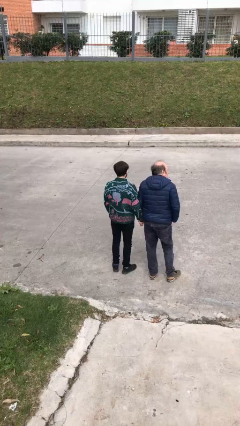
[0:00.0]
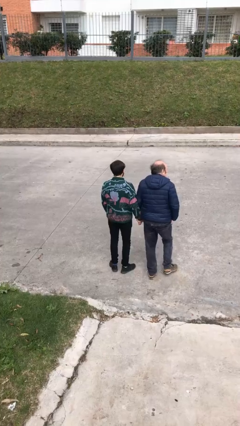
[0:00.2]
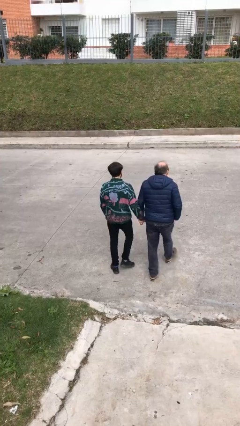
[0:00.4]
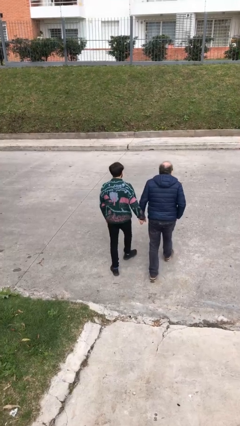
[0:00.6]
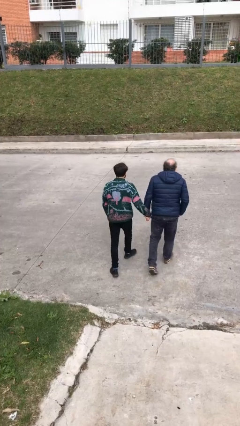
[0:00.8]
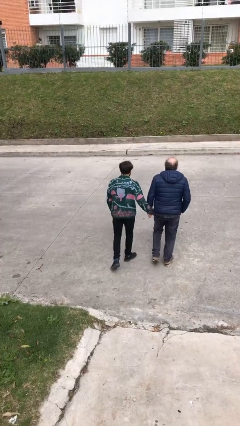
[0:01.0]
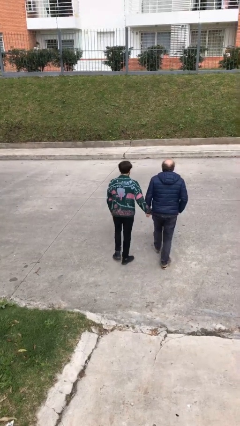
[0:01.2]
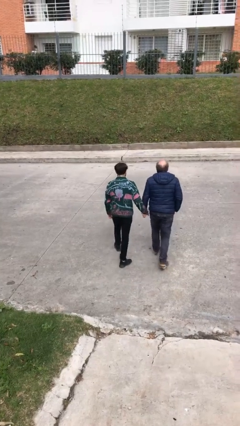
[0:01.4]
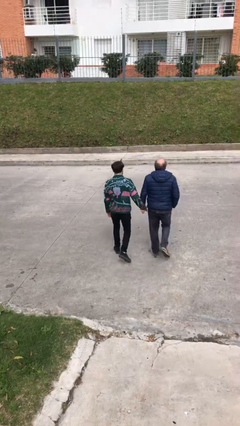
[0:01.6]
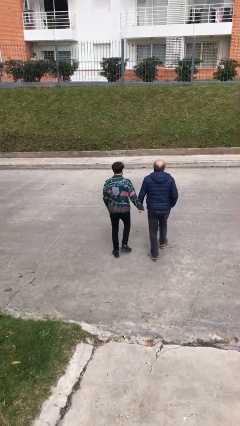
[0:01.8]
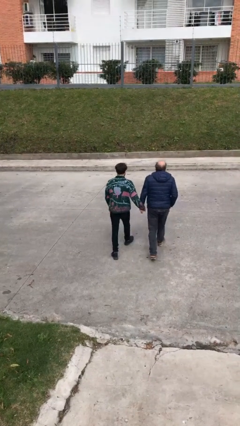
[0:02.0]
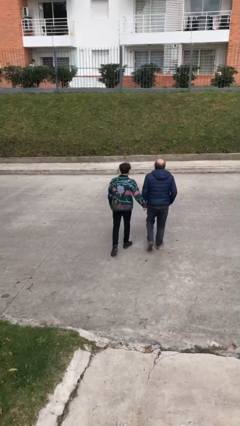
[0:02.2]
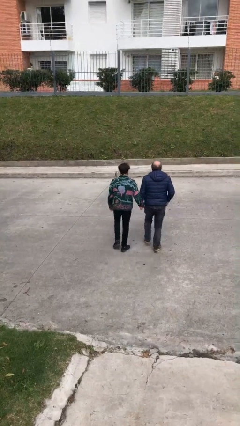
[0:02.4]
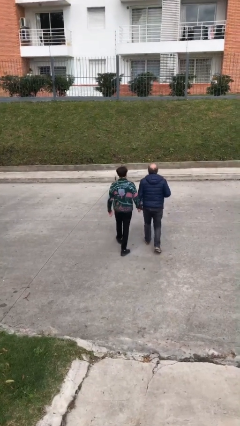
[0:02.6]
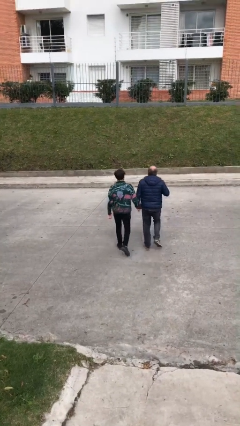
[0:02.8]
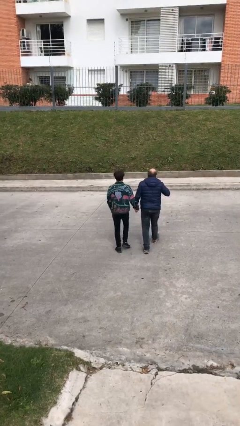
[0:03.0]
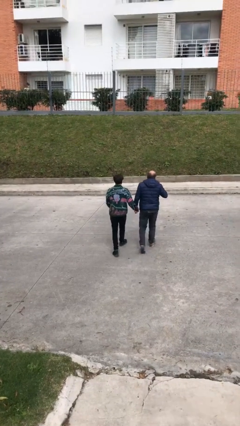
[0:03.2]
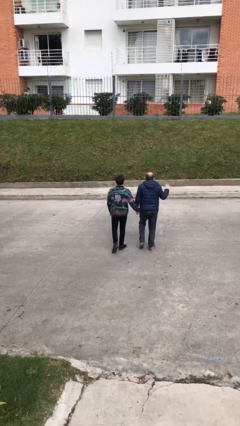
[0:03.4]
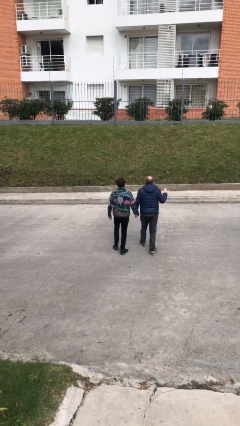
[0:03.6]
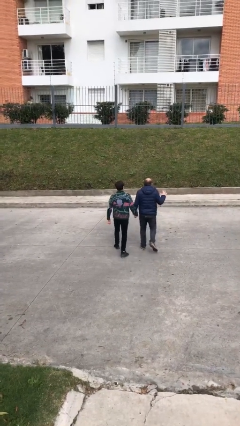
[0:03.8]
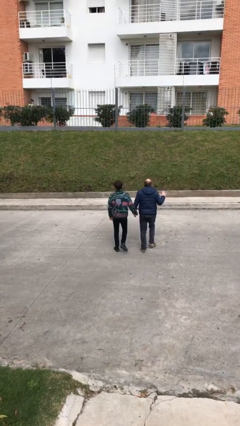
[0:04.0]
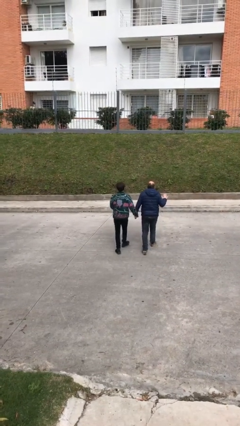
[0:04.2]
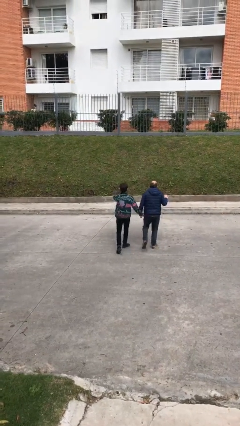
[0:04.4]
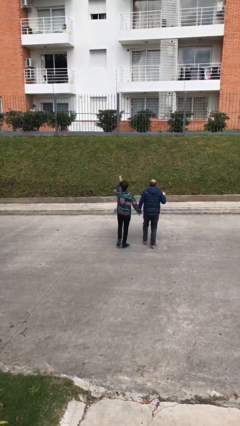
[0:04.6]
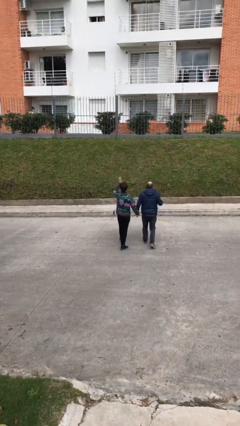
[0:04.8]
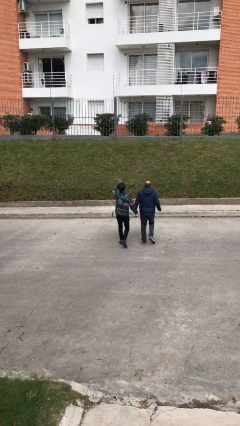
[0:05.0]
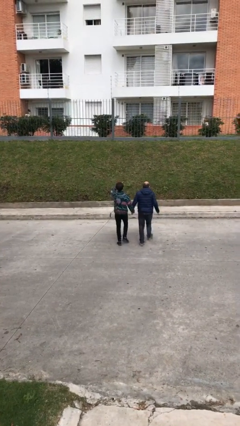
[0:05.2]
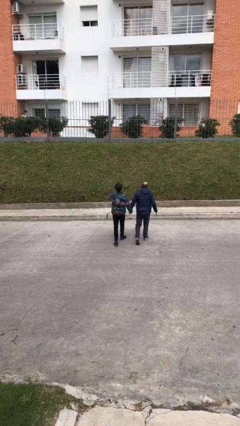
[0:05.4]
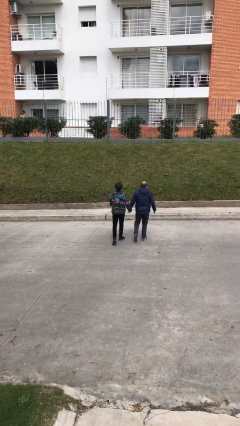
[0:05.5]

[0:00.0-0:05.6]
person holds hand

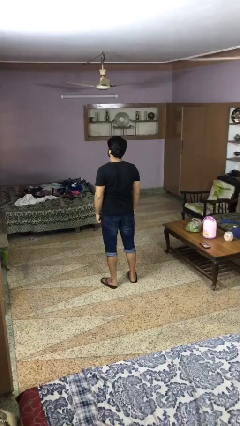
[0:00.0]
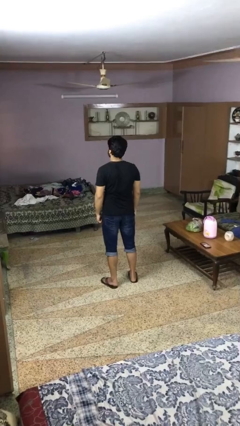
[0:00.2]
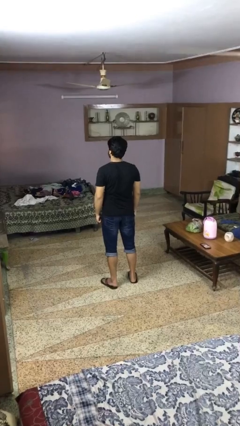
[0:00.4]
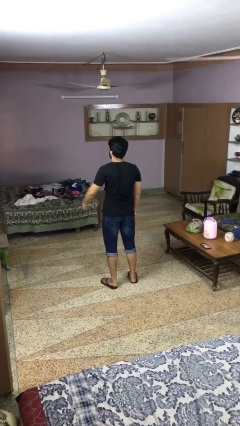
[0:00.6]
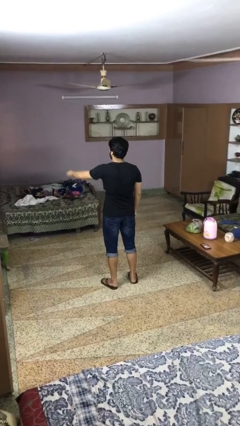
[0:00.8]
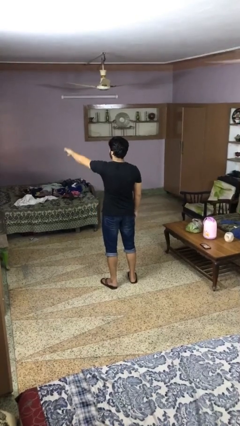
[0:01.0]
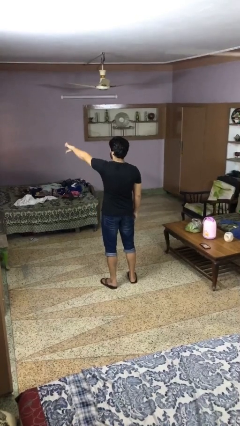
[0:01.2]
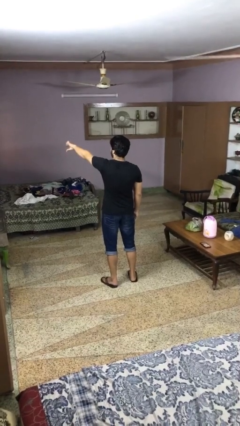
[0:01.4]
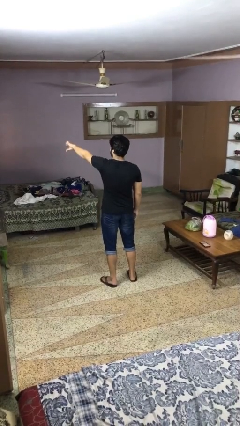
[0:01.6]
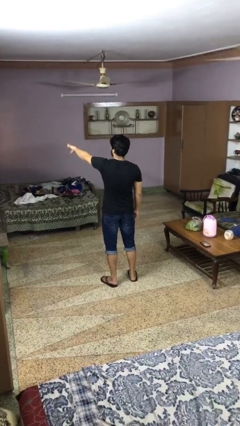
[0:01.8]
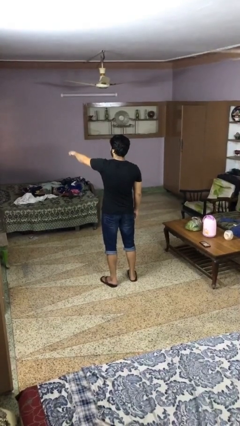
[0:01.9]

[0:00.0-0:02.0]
person gestures thumbs down

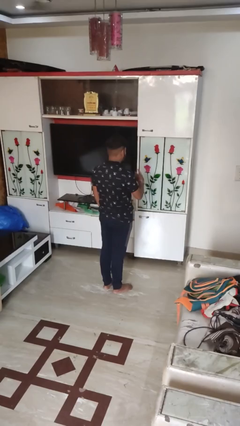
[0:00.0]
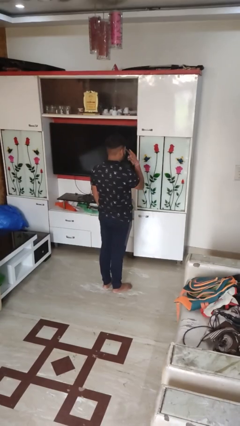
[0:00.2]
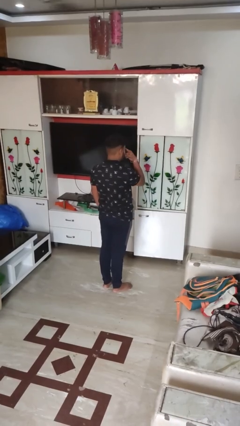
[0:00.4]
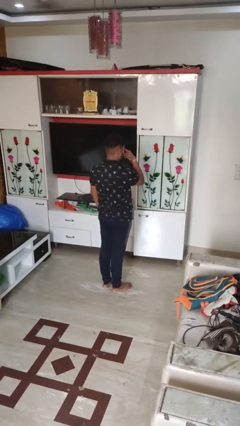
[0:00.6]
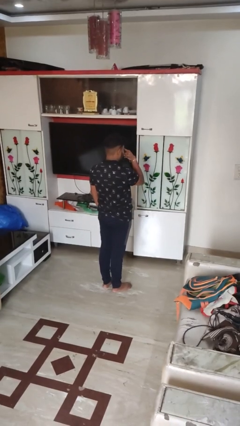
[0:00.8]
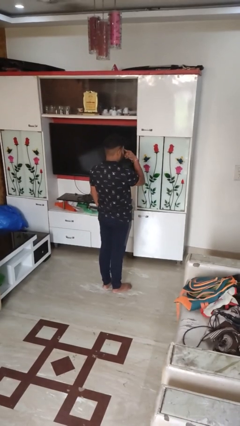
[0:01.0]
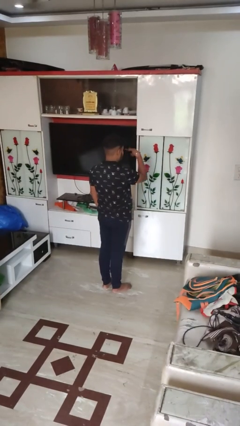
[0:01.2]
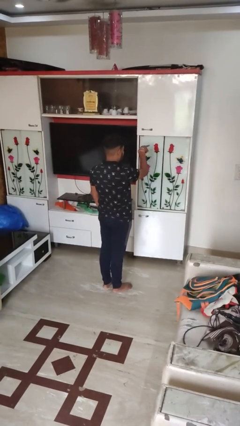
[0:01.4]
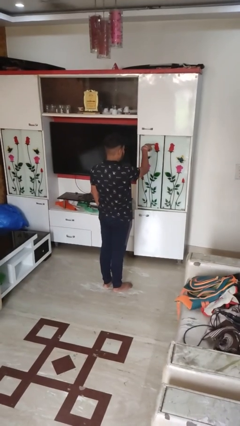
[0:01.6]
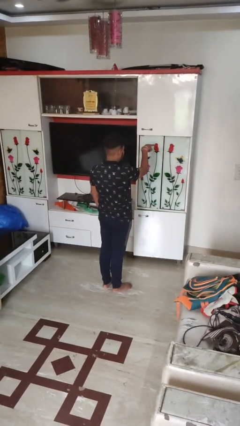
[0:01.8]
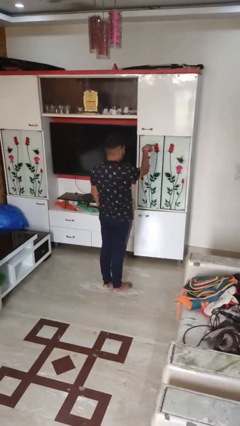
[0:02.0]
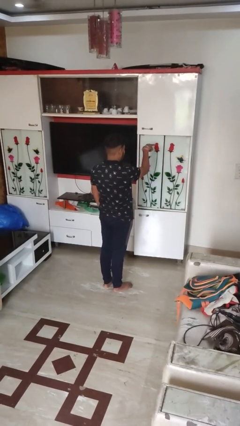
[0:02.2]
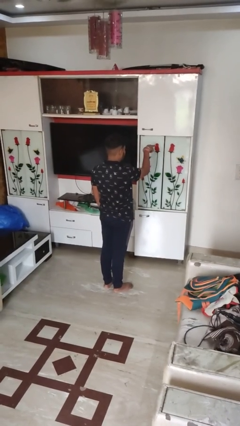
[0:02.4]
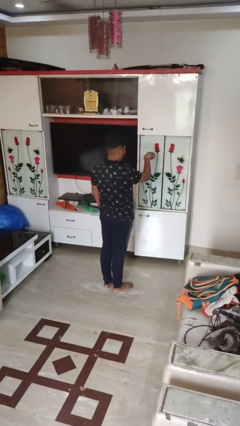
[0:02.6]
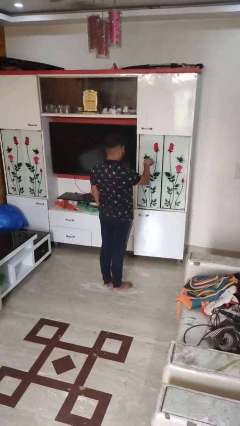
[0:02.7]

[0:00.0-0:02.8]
person gestures watch closely

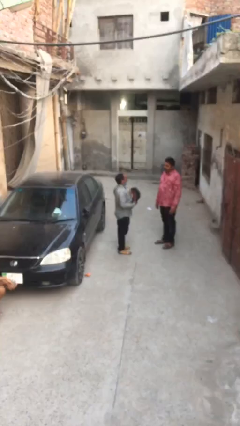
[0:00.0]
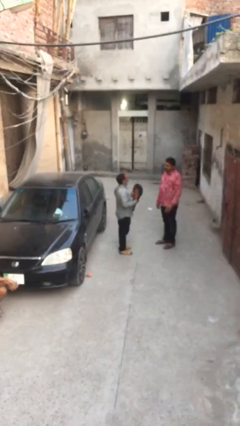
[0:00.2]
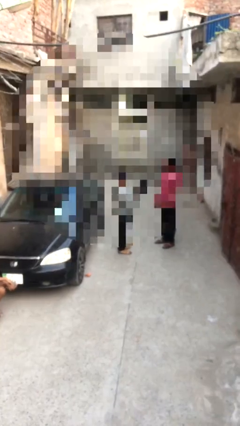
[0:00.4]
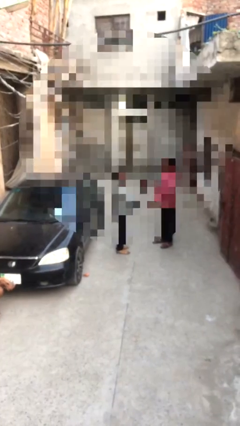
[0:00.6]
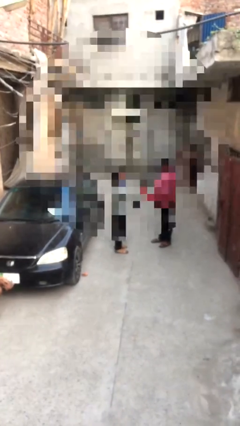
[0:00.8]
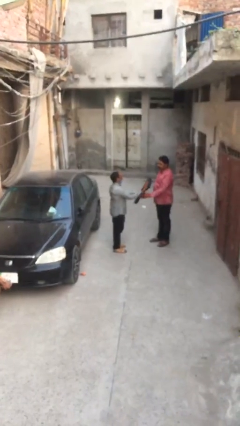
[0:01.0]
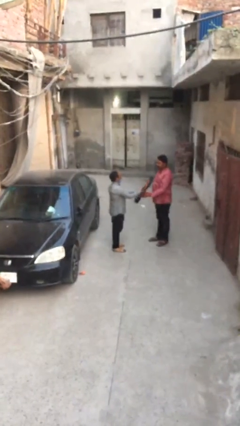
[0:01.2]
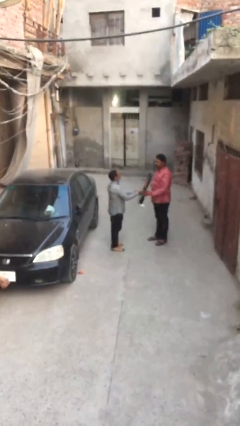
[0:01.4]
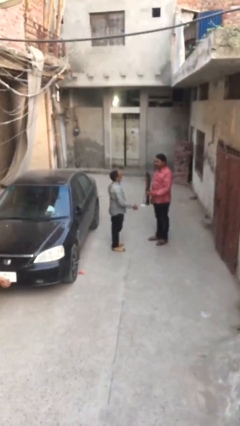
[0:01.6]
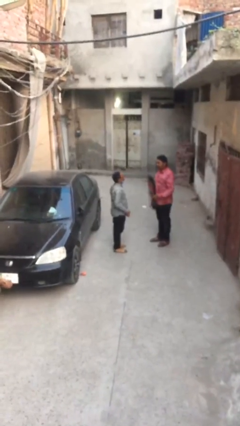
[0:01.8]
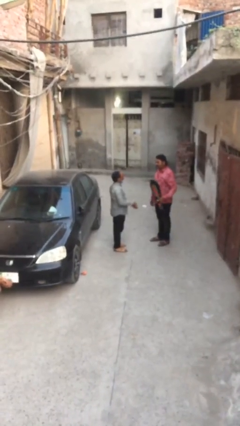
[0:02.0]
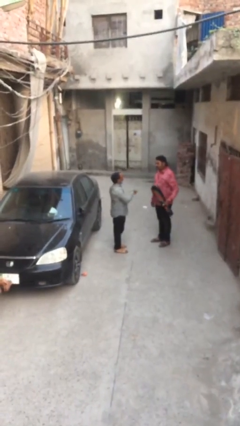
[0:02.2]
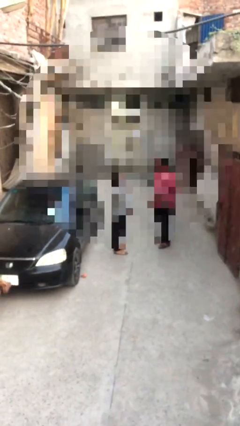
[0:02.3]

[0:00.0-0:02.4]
person transfers object to person

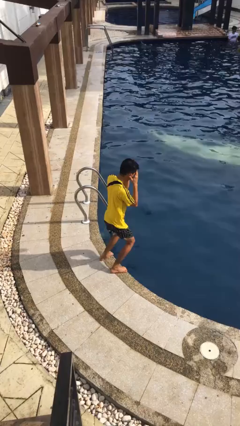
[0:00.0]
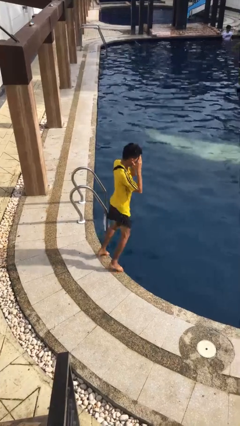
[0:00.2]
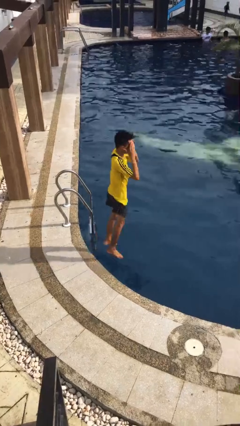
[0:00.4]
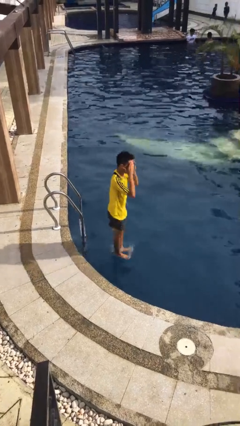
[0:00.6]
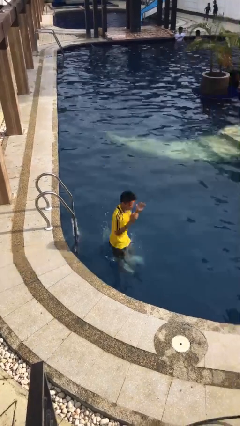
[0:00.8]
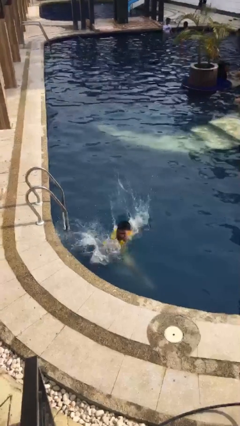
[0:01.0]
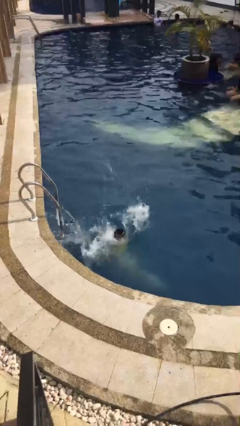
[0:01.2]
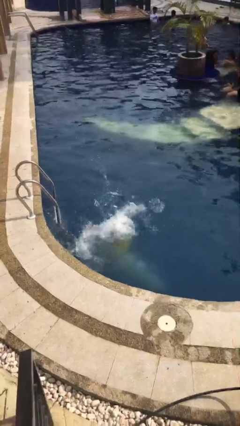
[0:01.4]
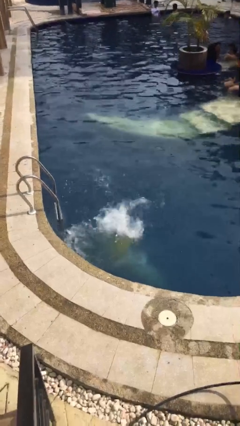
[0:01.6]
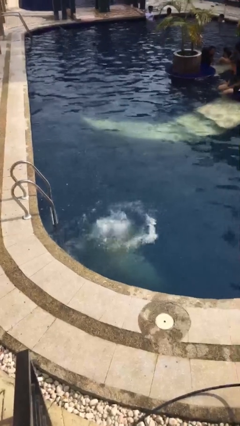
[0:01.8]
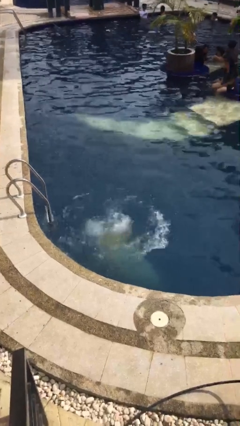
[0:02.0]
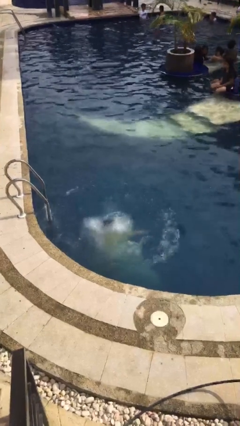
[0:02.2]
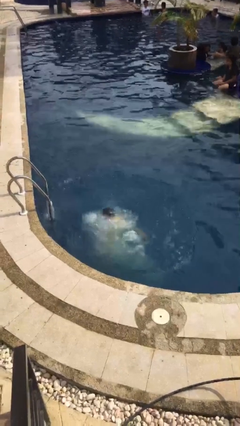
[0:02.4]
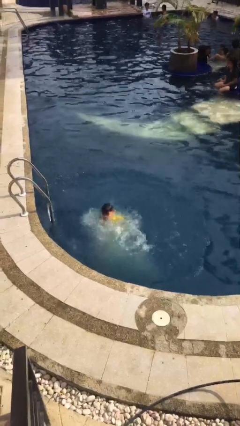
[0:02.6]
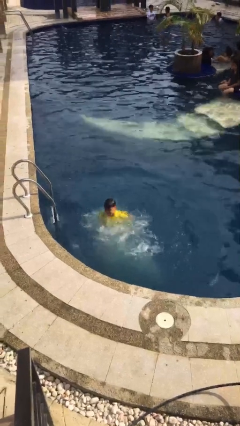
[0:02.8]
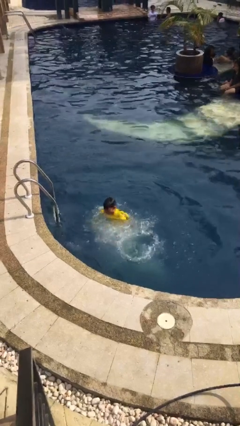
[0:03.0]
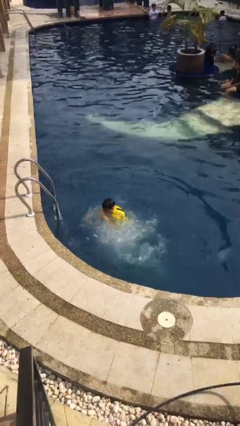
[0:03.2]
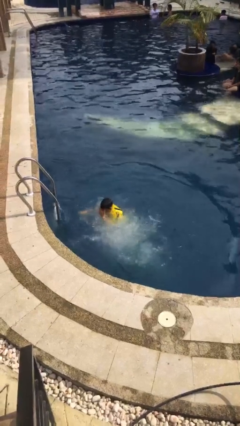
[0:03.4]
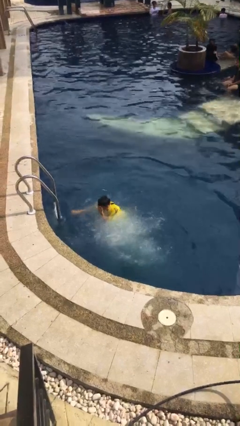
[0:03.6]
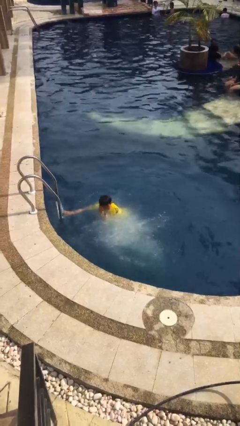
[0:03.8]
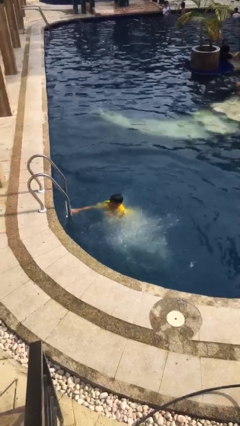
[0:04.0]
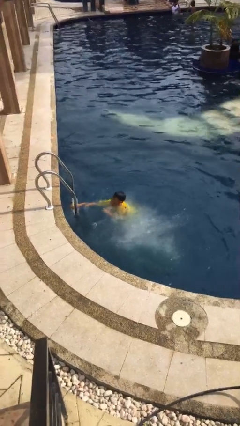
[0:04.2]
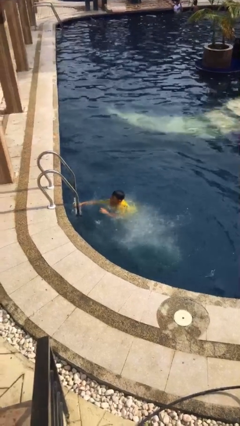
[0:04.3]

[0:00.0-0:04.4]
person jumps into pool

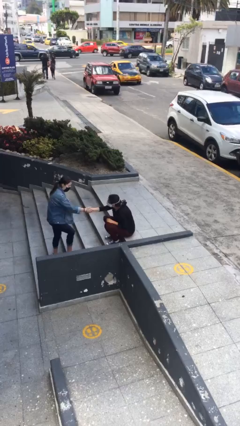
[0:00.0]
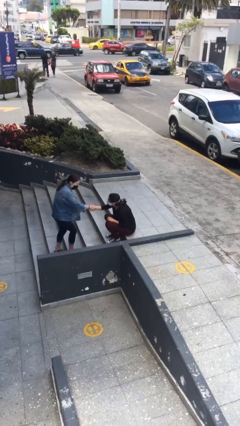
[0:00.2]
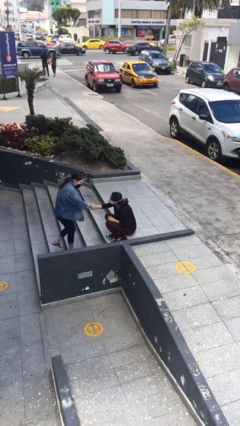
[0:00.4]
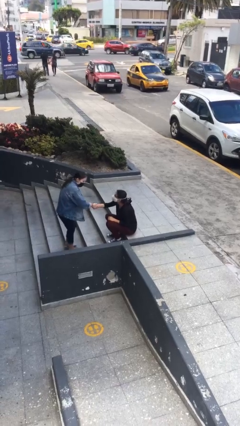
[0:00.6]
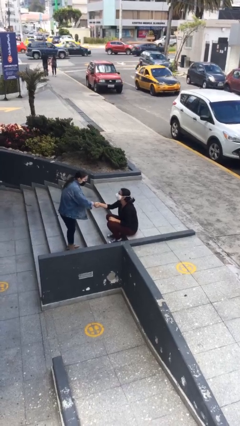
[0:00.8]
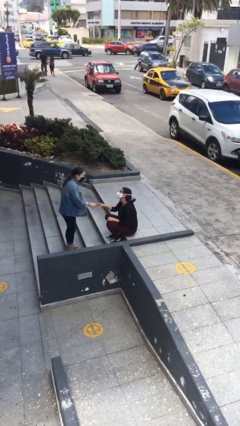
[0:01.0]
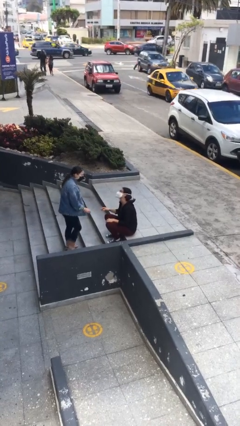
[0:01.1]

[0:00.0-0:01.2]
person shakes hand
